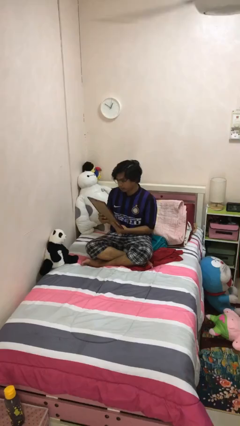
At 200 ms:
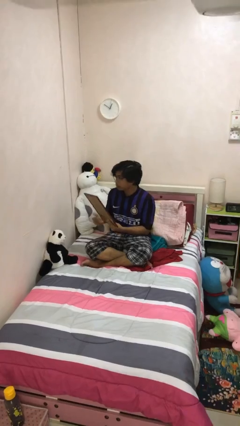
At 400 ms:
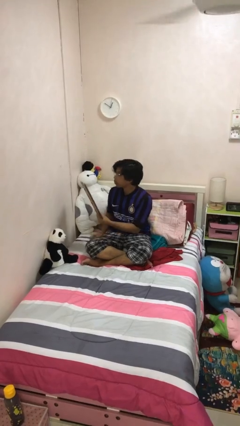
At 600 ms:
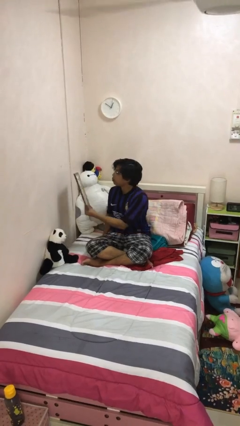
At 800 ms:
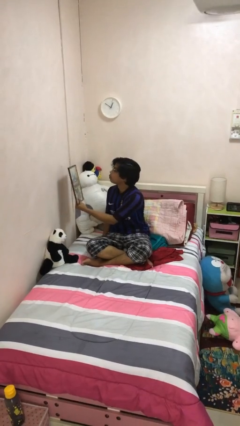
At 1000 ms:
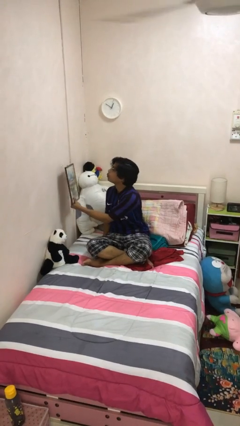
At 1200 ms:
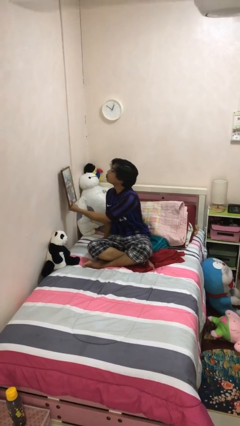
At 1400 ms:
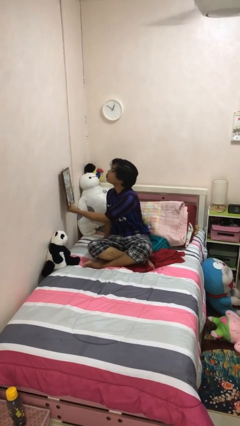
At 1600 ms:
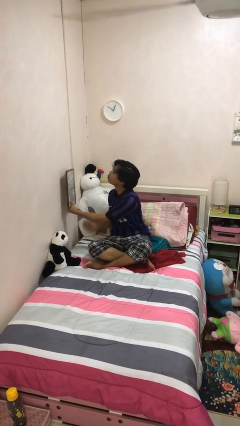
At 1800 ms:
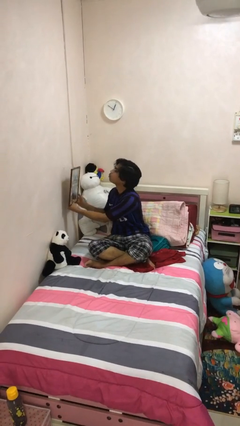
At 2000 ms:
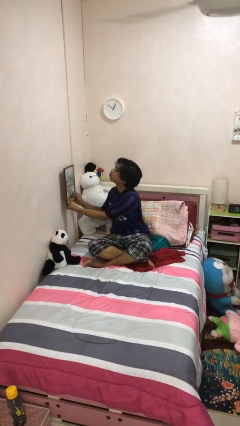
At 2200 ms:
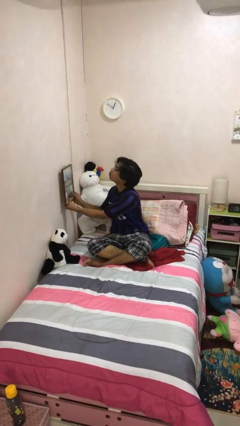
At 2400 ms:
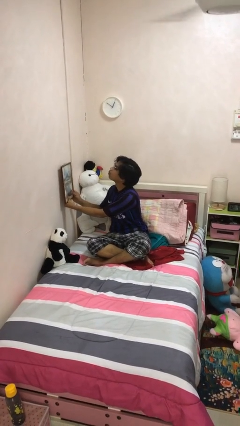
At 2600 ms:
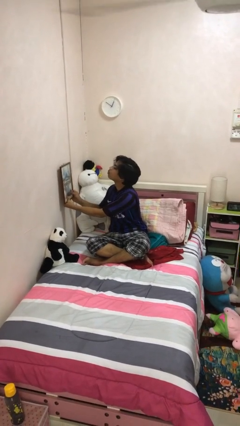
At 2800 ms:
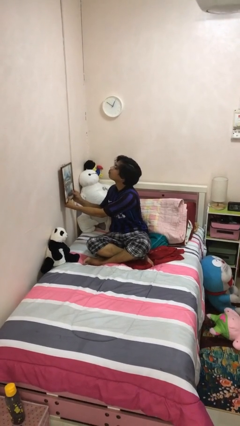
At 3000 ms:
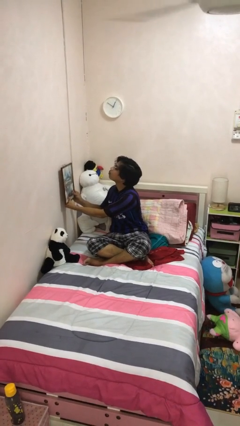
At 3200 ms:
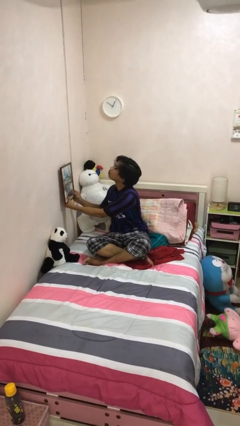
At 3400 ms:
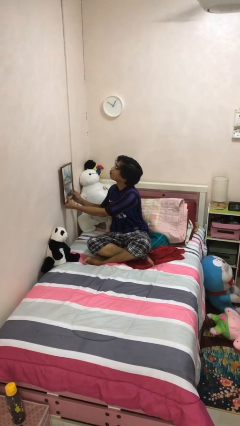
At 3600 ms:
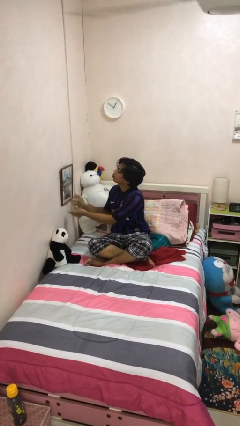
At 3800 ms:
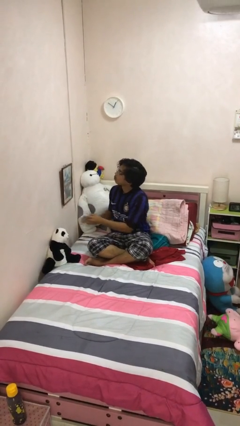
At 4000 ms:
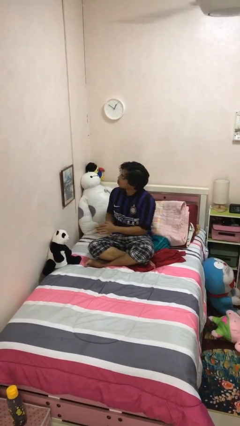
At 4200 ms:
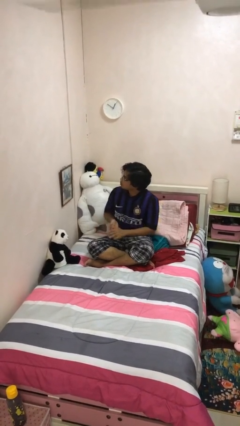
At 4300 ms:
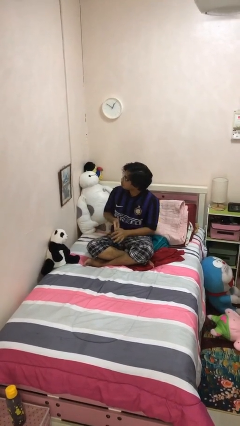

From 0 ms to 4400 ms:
person puts up picture frame

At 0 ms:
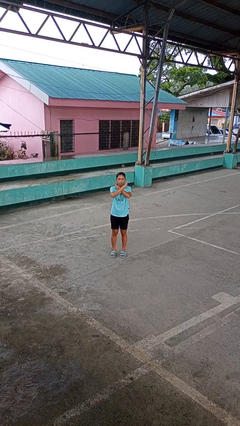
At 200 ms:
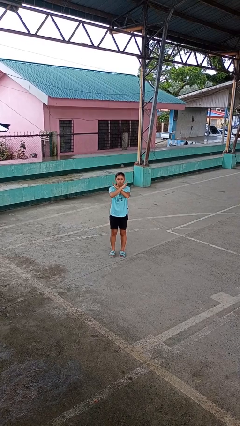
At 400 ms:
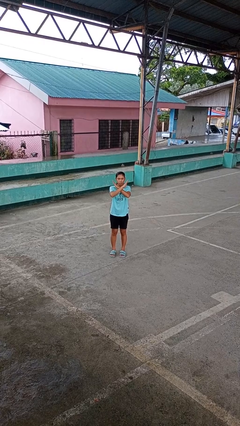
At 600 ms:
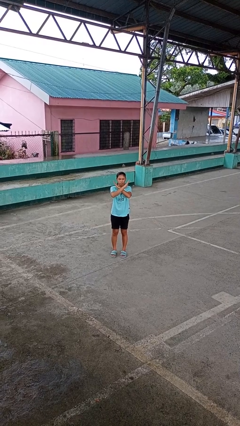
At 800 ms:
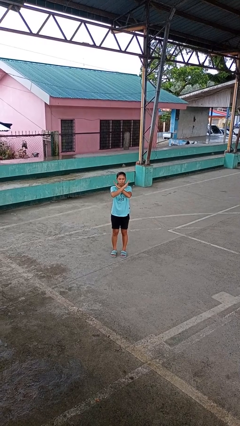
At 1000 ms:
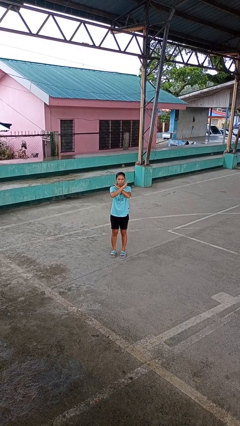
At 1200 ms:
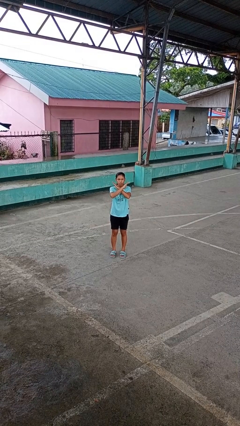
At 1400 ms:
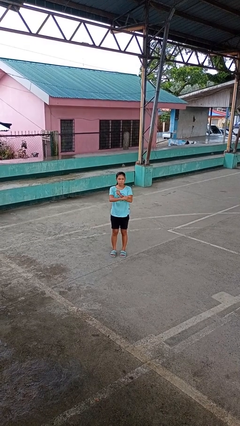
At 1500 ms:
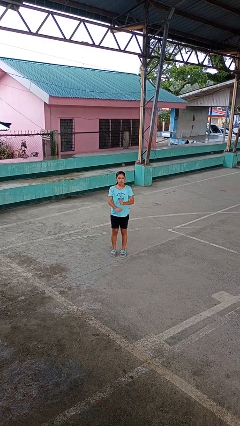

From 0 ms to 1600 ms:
person gestures arms x

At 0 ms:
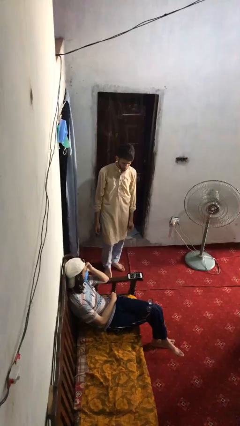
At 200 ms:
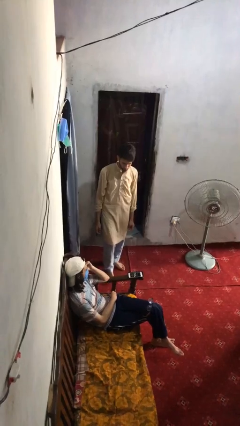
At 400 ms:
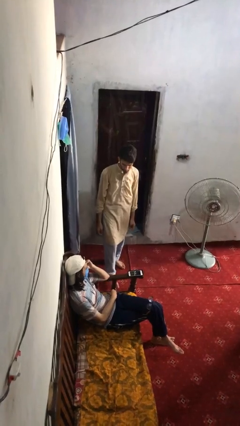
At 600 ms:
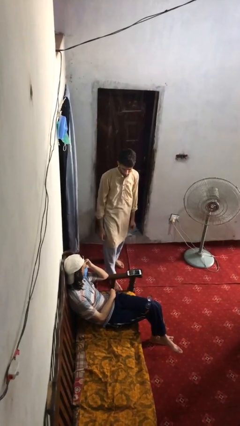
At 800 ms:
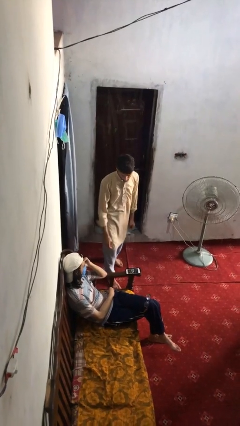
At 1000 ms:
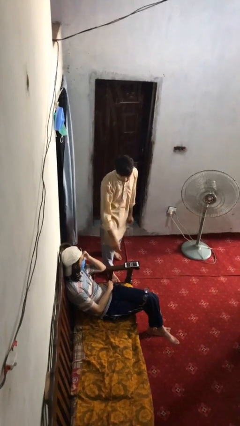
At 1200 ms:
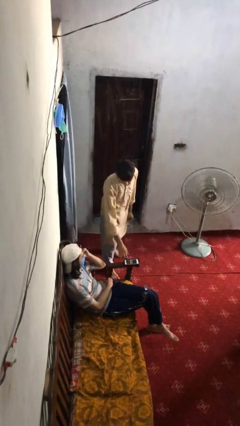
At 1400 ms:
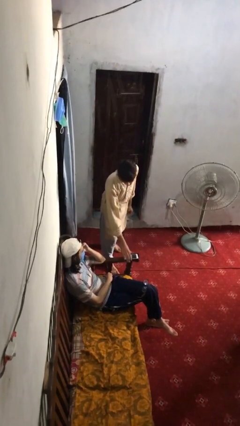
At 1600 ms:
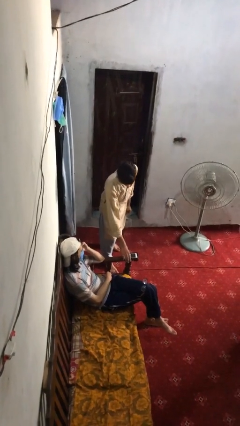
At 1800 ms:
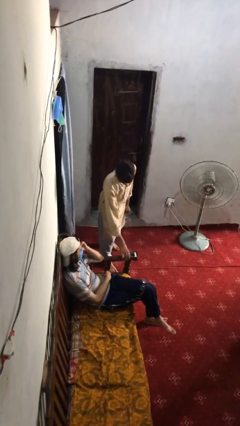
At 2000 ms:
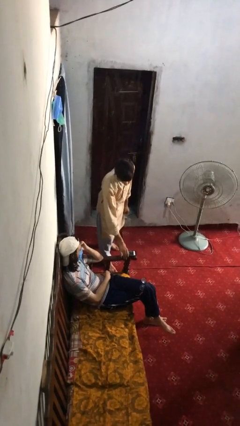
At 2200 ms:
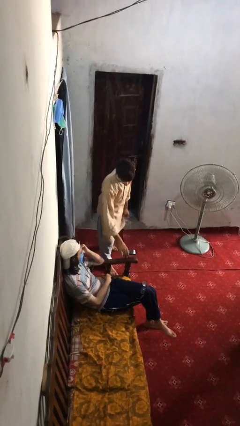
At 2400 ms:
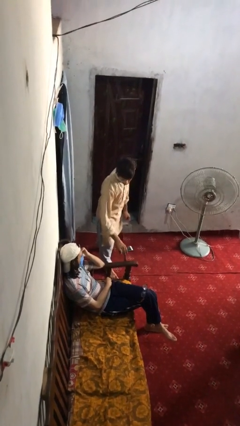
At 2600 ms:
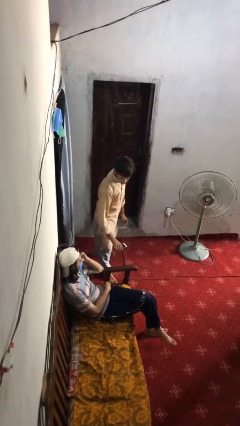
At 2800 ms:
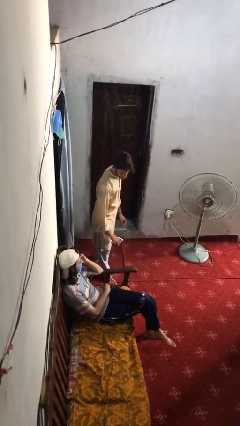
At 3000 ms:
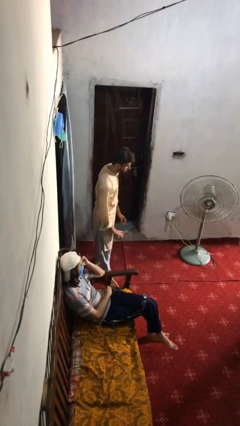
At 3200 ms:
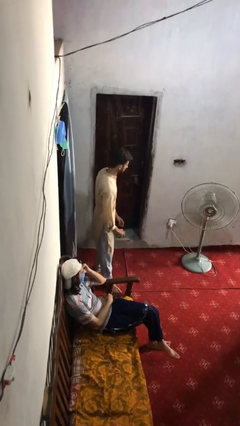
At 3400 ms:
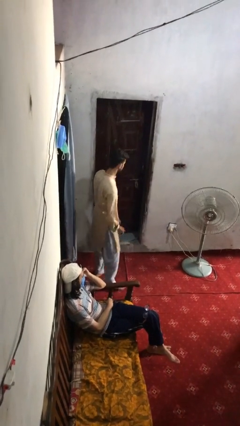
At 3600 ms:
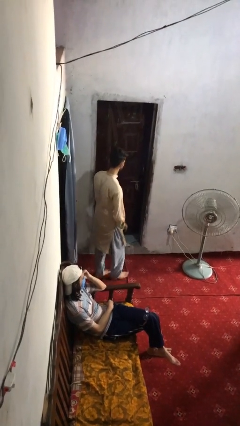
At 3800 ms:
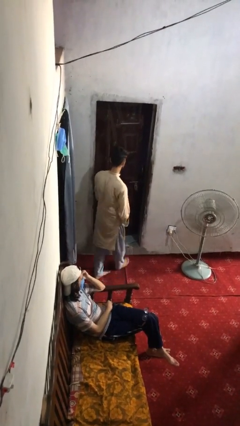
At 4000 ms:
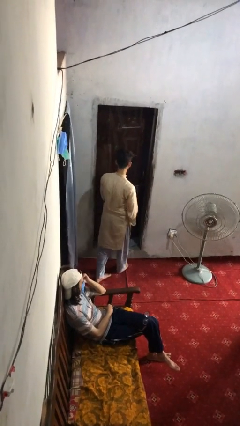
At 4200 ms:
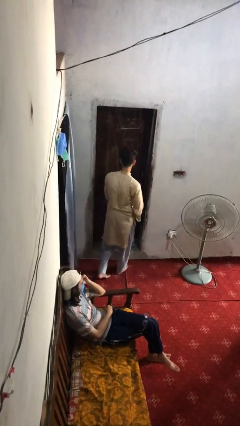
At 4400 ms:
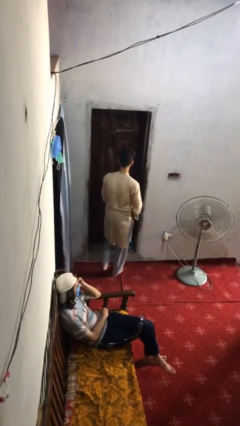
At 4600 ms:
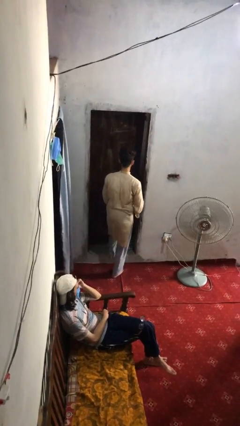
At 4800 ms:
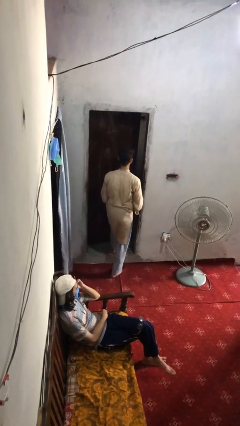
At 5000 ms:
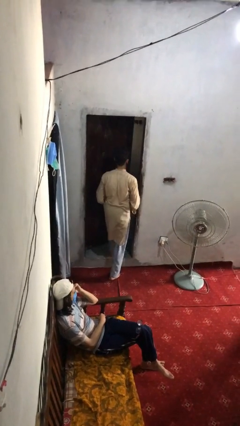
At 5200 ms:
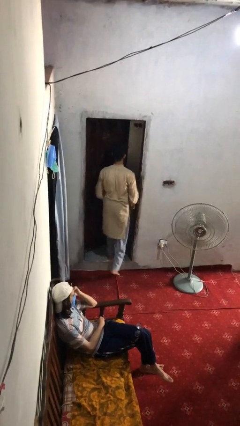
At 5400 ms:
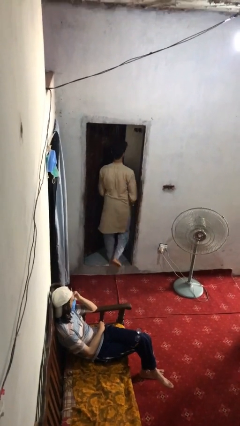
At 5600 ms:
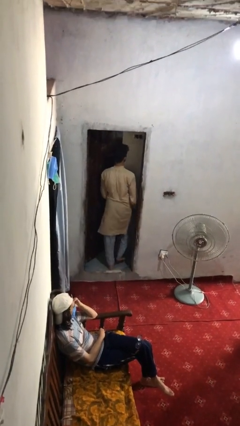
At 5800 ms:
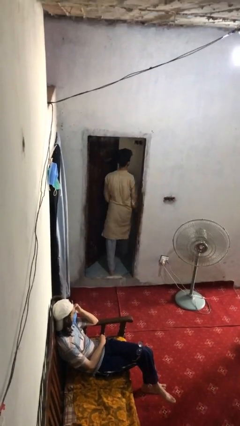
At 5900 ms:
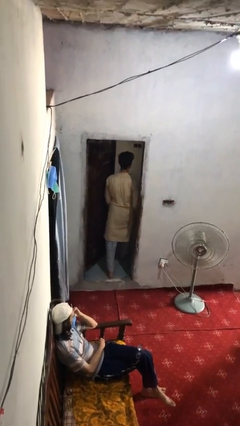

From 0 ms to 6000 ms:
person steals object from person

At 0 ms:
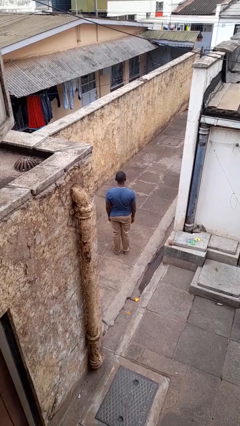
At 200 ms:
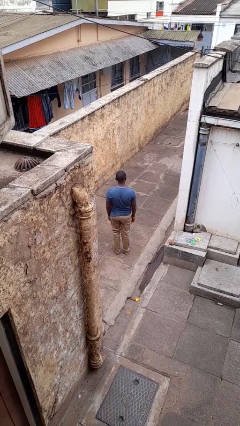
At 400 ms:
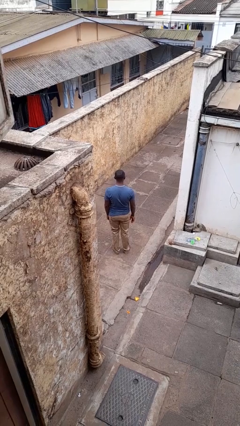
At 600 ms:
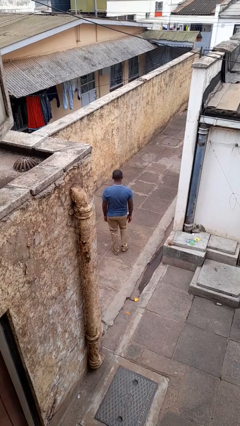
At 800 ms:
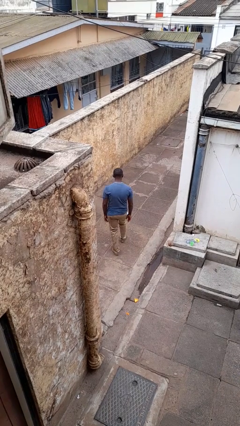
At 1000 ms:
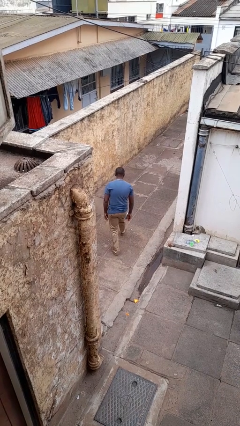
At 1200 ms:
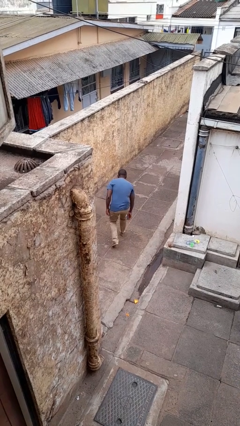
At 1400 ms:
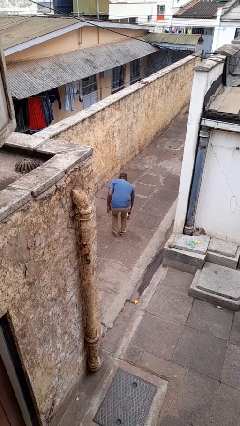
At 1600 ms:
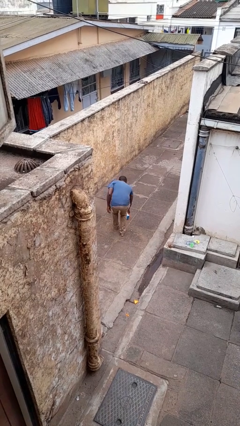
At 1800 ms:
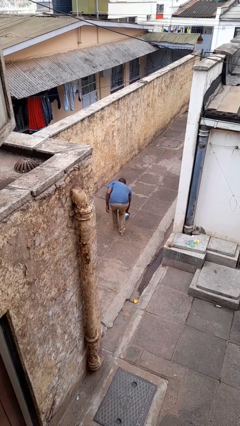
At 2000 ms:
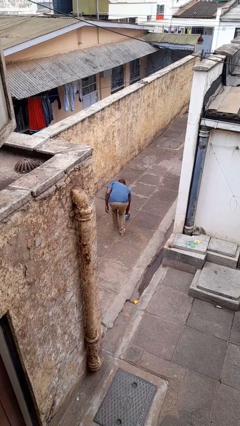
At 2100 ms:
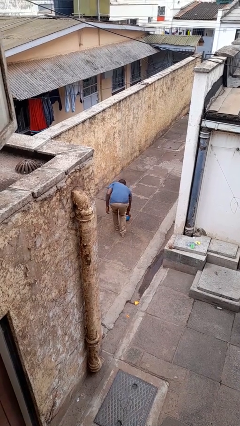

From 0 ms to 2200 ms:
person picks up object from floor

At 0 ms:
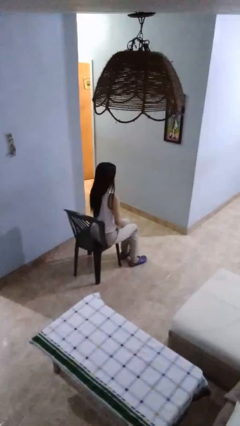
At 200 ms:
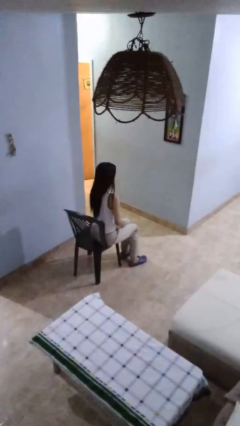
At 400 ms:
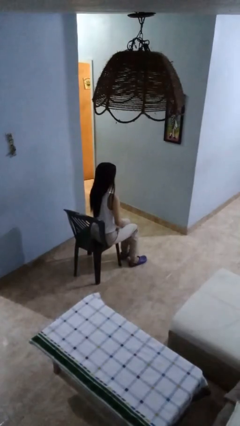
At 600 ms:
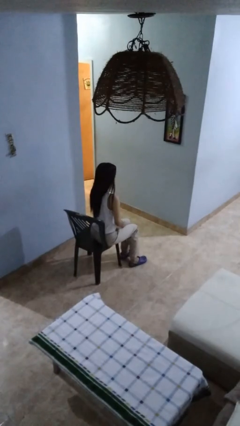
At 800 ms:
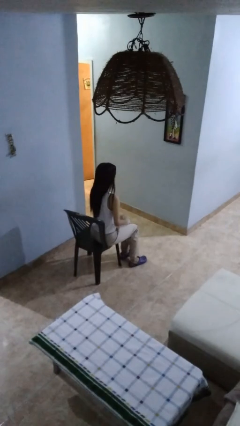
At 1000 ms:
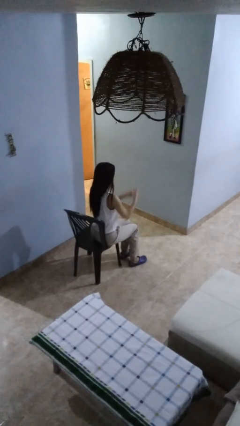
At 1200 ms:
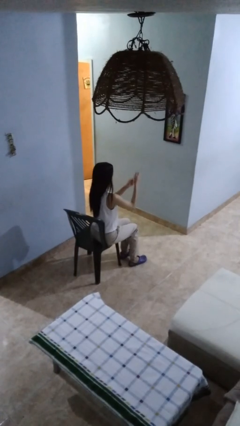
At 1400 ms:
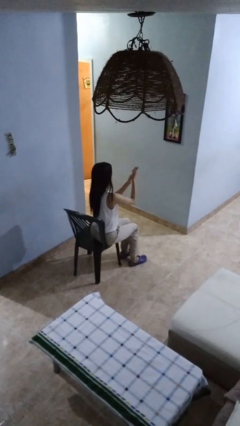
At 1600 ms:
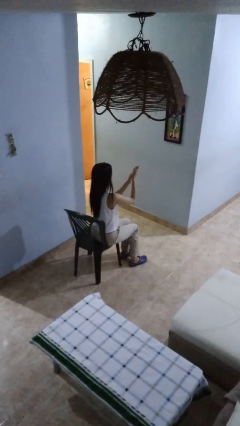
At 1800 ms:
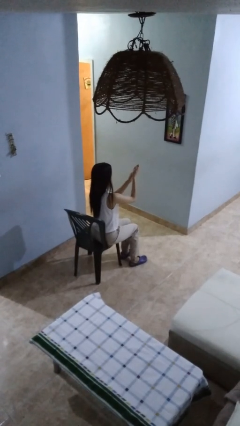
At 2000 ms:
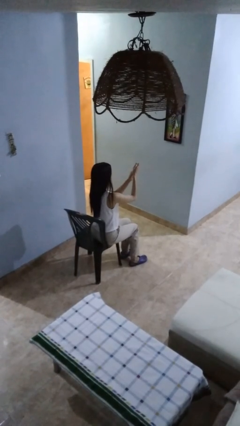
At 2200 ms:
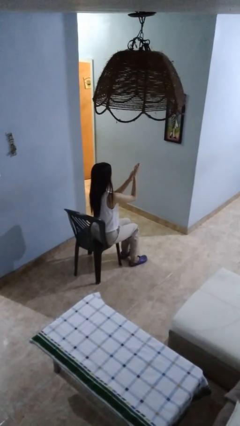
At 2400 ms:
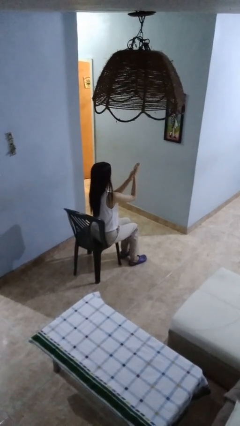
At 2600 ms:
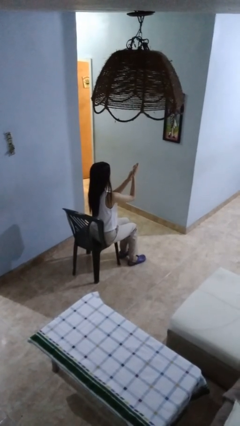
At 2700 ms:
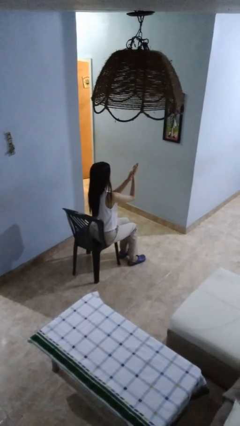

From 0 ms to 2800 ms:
person clips fingernails

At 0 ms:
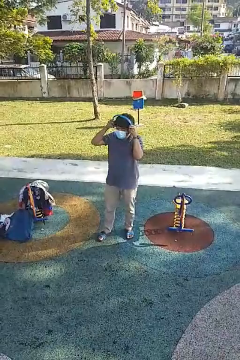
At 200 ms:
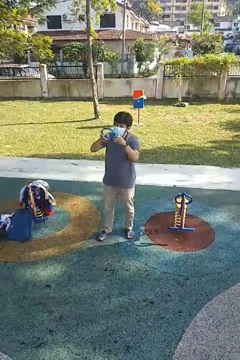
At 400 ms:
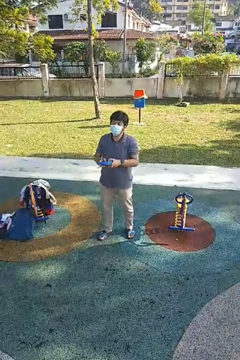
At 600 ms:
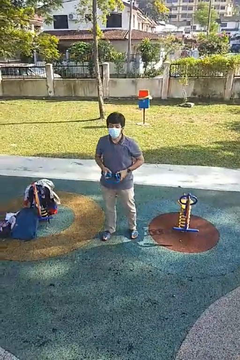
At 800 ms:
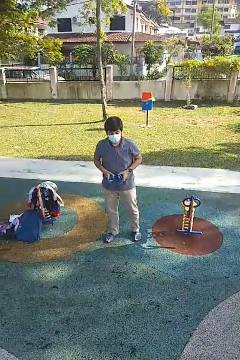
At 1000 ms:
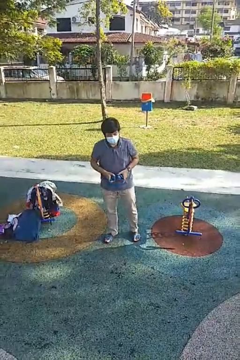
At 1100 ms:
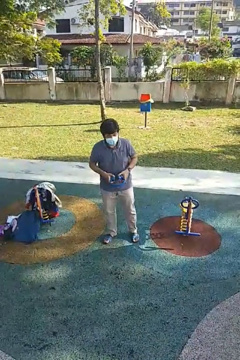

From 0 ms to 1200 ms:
person takes off headphones
